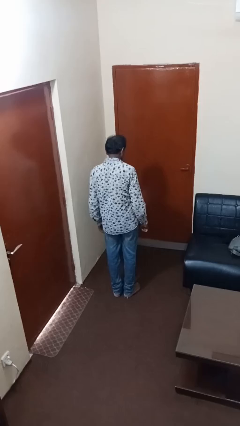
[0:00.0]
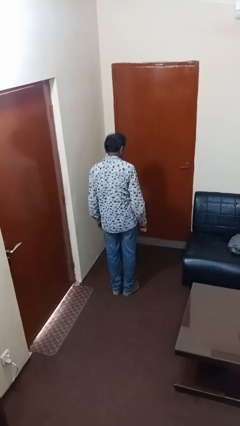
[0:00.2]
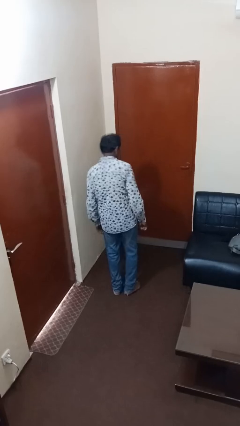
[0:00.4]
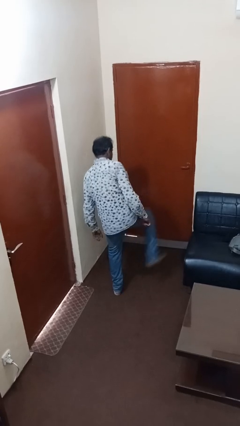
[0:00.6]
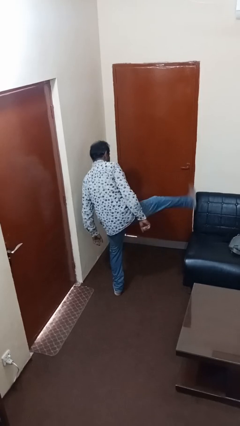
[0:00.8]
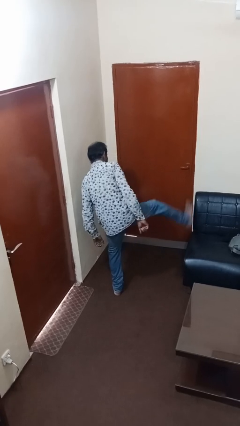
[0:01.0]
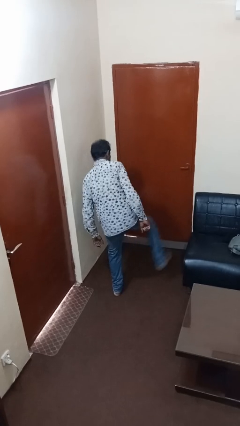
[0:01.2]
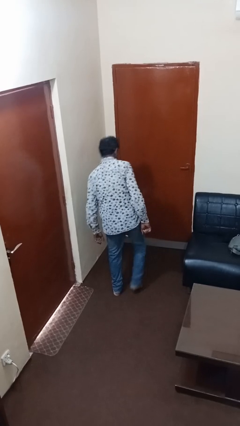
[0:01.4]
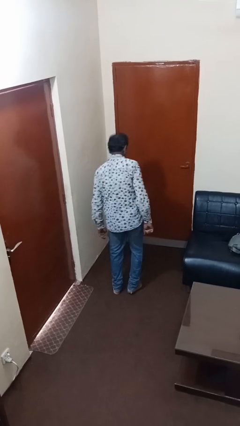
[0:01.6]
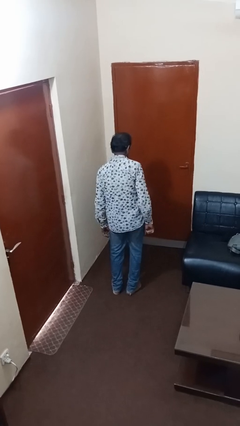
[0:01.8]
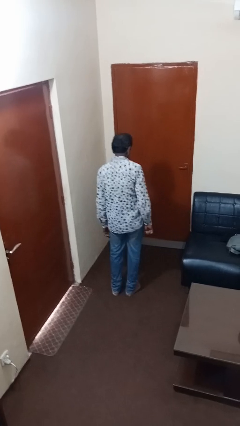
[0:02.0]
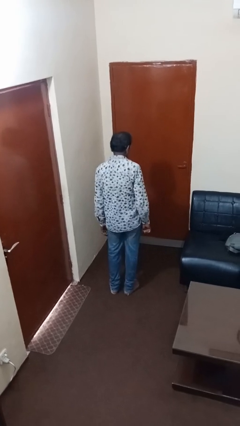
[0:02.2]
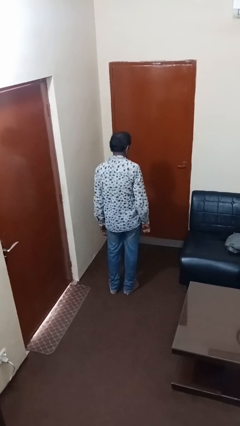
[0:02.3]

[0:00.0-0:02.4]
person karate kicks

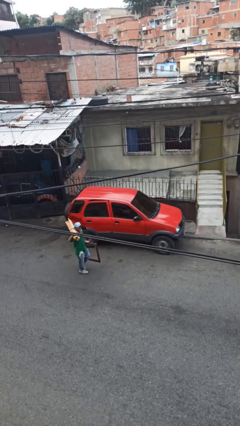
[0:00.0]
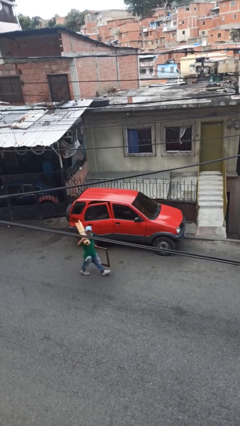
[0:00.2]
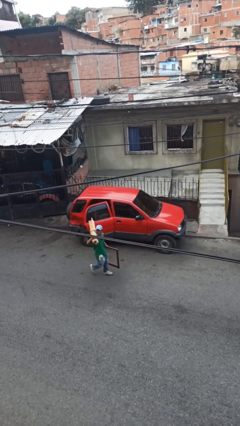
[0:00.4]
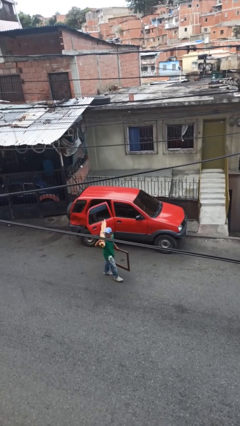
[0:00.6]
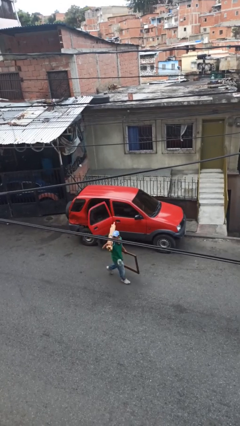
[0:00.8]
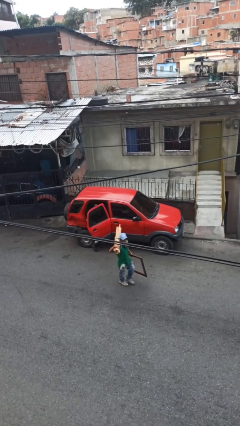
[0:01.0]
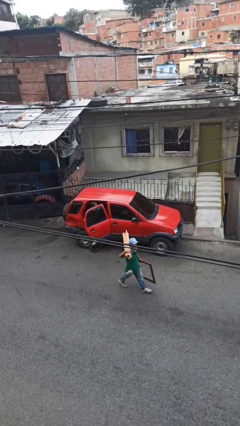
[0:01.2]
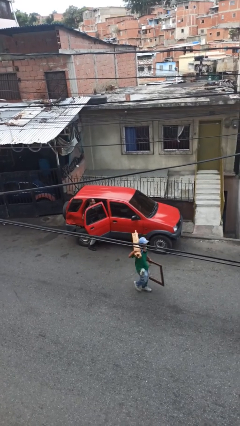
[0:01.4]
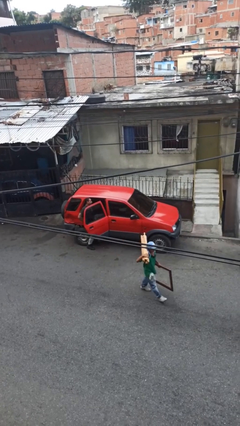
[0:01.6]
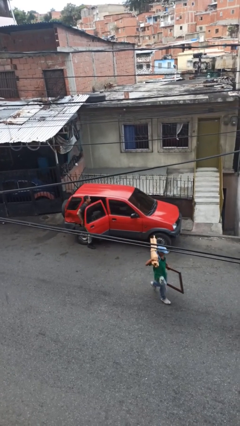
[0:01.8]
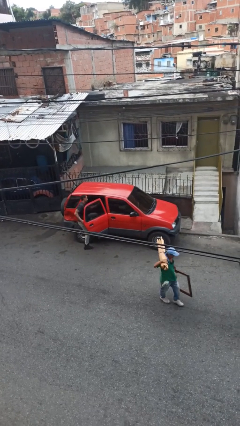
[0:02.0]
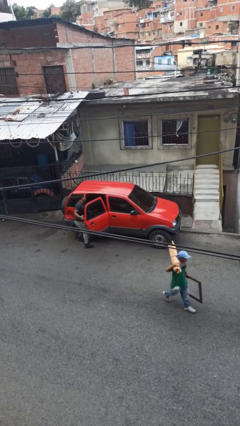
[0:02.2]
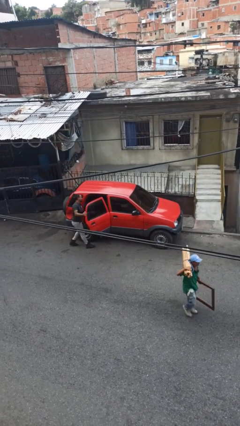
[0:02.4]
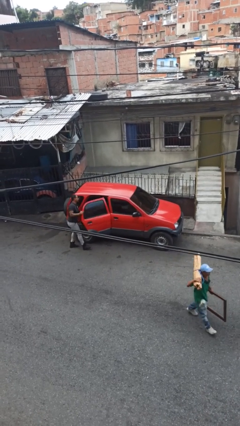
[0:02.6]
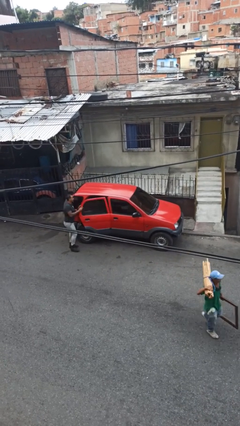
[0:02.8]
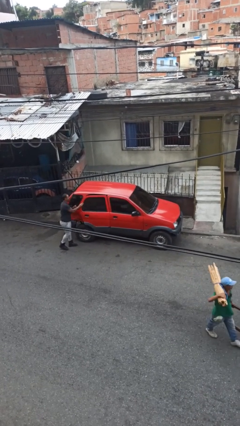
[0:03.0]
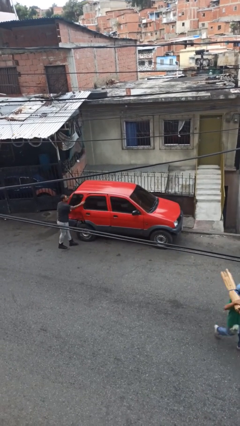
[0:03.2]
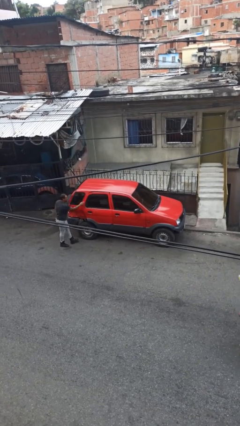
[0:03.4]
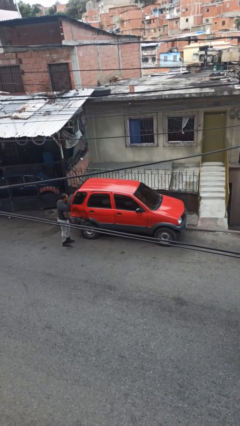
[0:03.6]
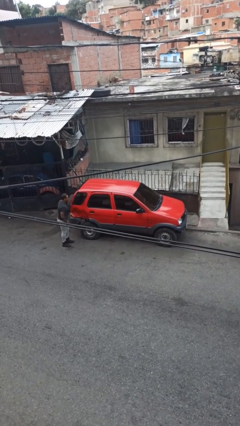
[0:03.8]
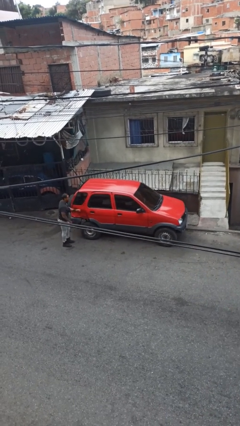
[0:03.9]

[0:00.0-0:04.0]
car drops off person

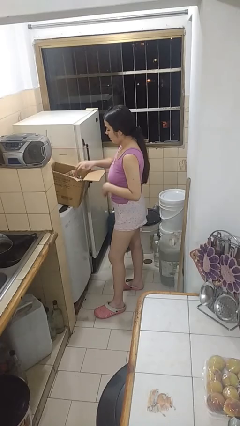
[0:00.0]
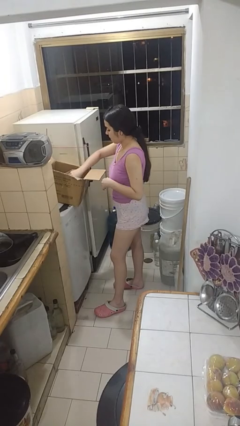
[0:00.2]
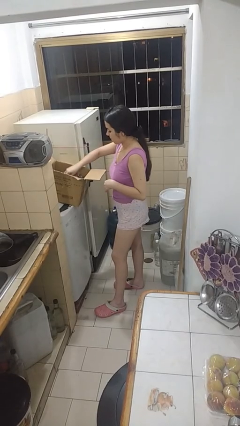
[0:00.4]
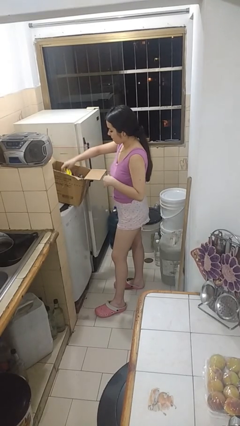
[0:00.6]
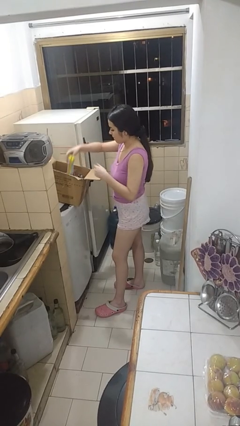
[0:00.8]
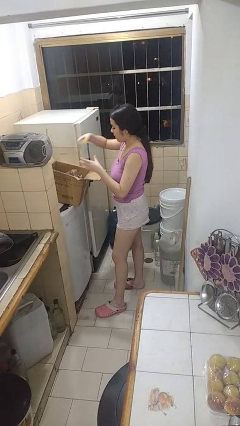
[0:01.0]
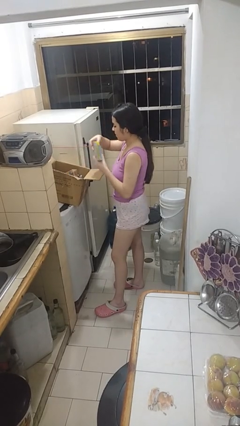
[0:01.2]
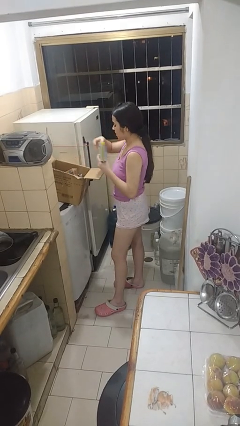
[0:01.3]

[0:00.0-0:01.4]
person takes object from box

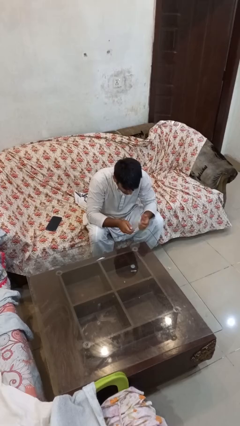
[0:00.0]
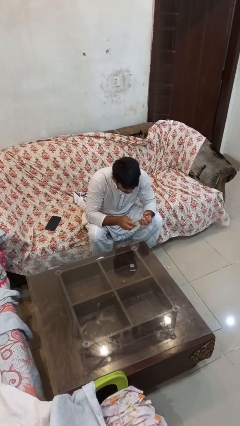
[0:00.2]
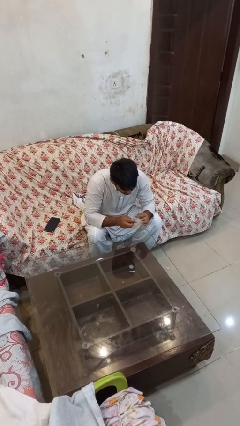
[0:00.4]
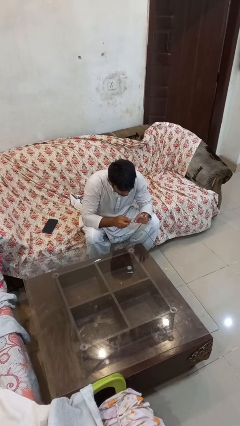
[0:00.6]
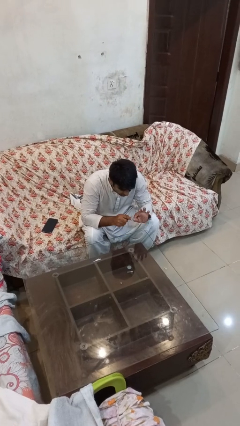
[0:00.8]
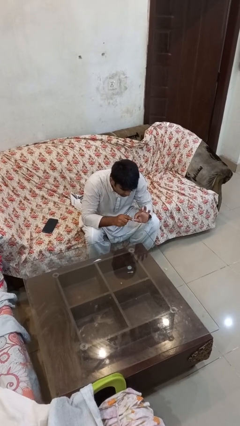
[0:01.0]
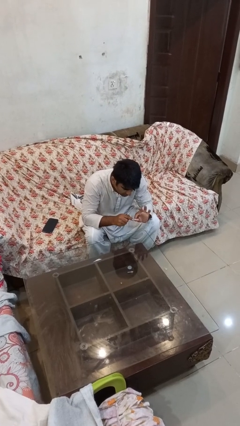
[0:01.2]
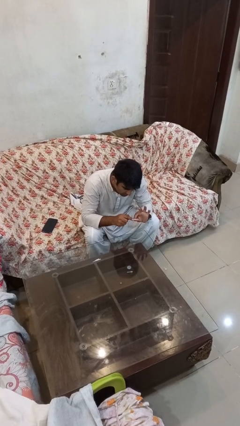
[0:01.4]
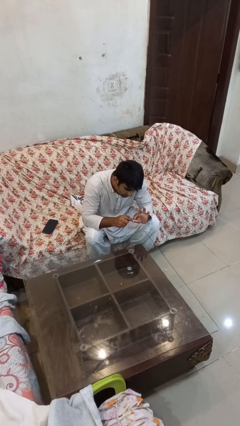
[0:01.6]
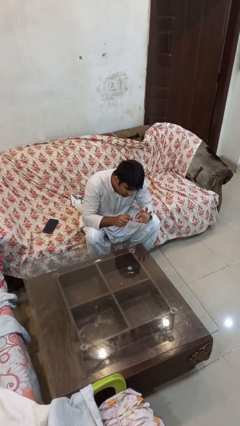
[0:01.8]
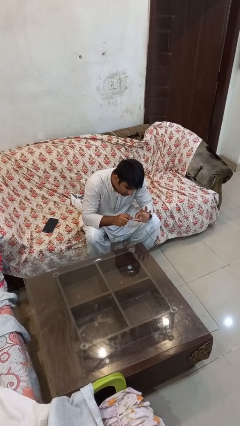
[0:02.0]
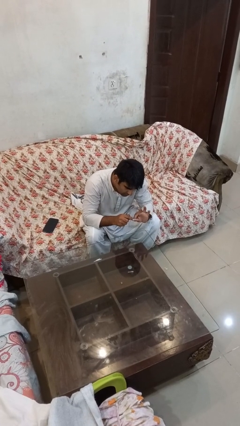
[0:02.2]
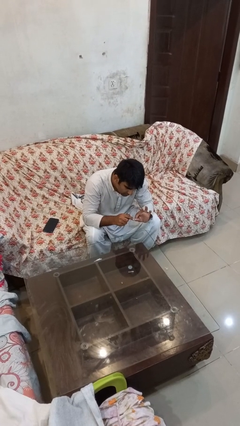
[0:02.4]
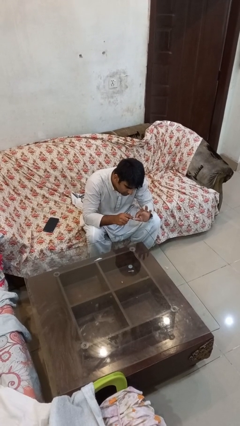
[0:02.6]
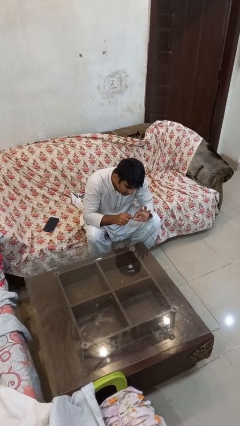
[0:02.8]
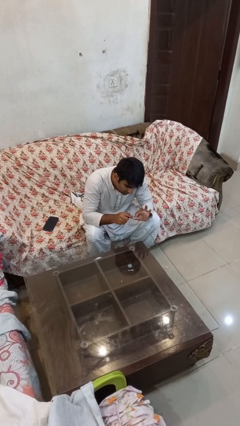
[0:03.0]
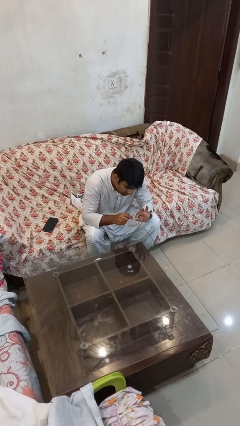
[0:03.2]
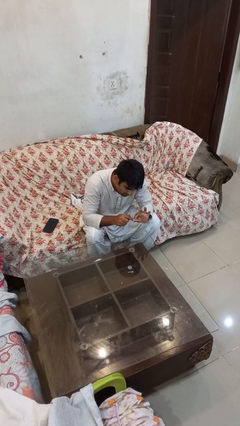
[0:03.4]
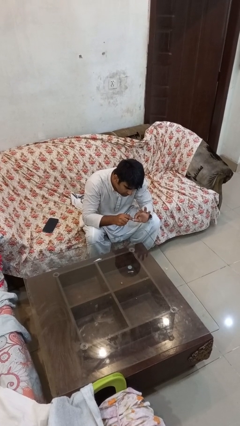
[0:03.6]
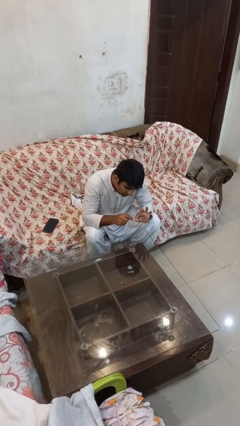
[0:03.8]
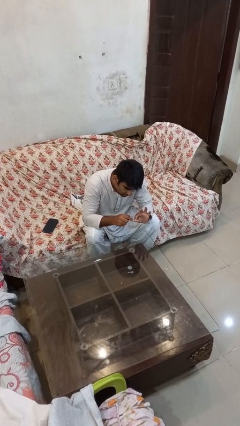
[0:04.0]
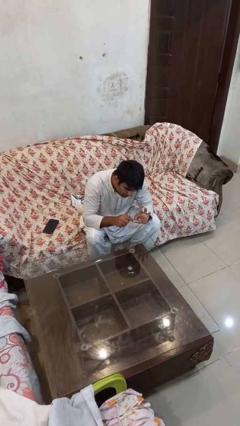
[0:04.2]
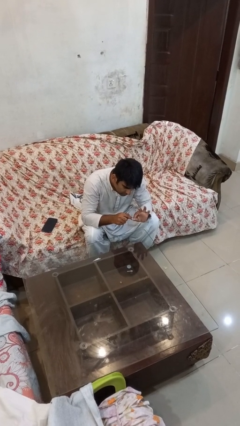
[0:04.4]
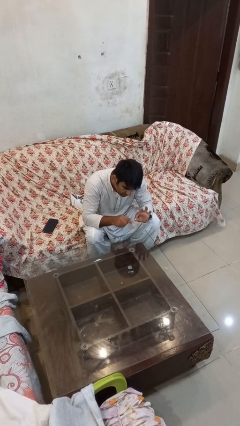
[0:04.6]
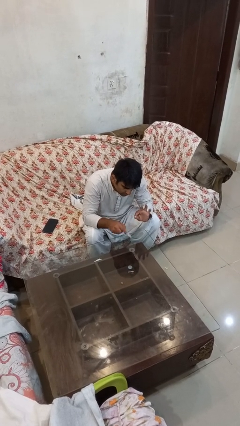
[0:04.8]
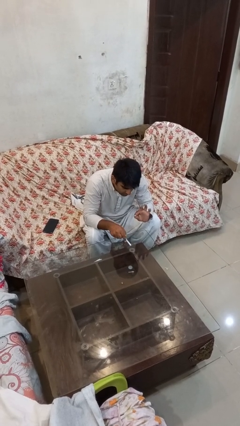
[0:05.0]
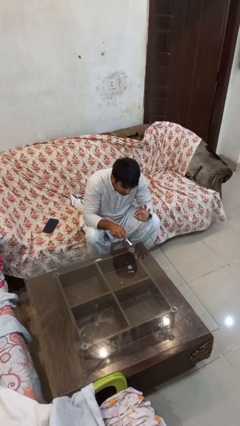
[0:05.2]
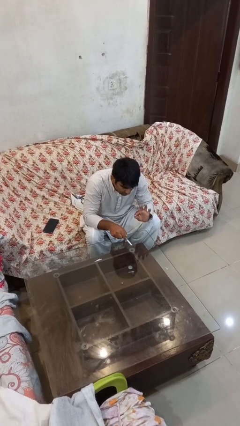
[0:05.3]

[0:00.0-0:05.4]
person files fingernails

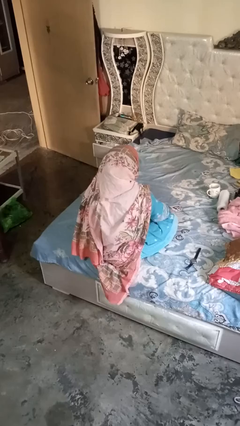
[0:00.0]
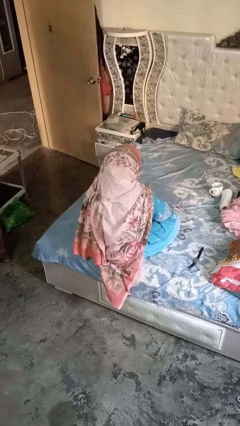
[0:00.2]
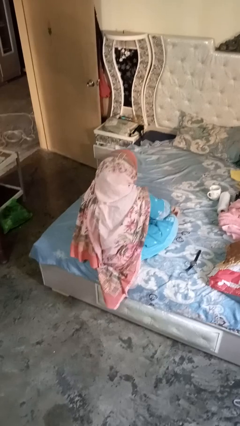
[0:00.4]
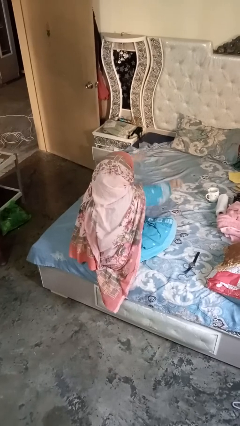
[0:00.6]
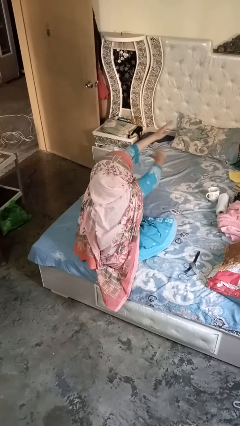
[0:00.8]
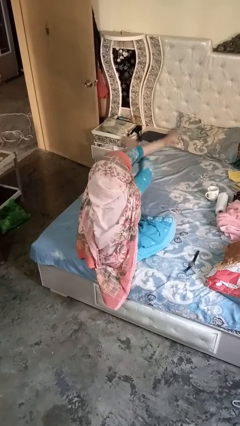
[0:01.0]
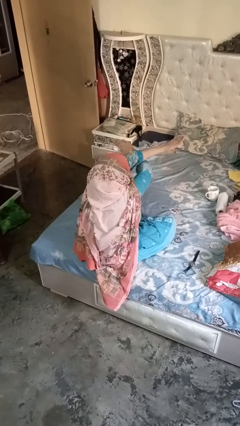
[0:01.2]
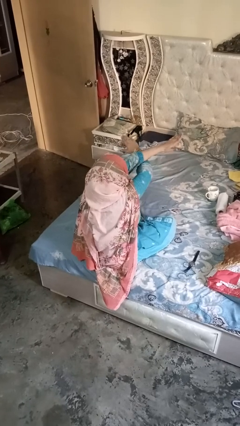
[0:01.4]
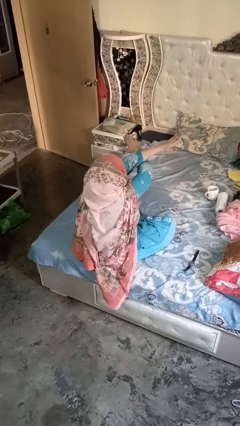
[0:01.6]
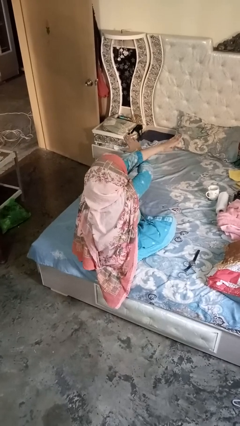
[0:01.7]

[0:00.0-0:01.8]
person gestures arms x

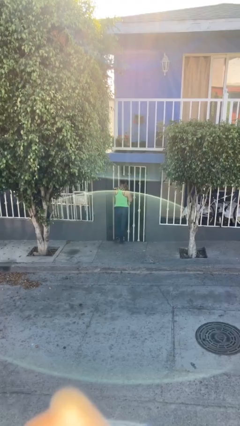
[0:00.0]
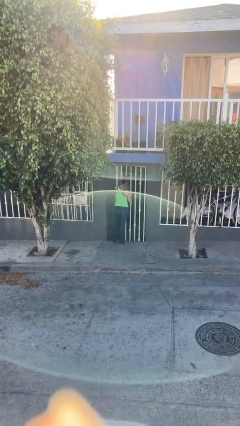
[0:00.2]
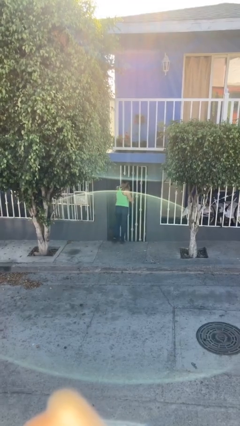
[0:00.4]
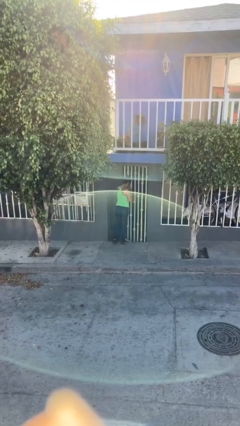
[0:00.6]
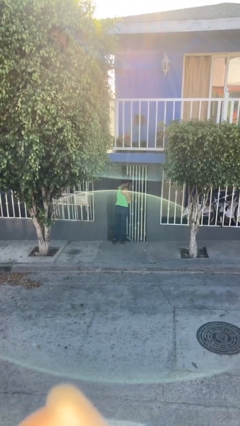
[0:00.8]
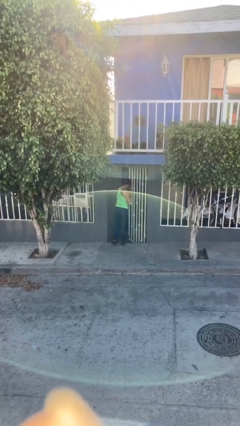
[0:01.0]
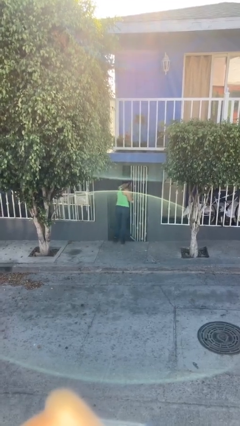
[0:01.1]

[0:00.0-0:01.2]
person opens facility door

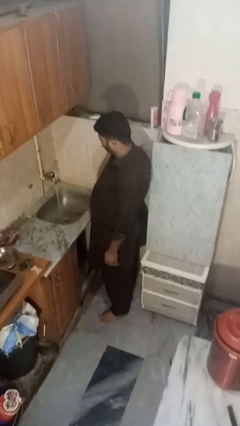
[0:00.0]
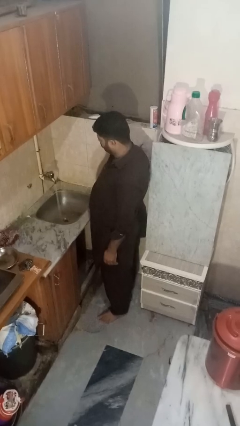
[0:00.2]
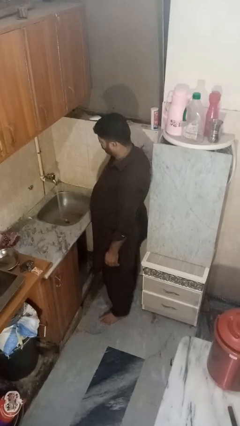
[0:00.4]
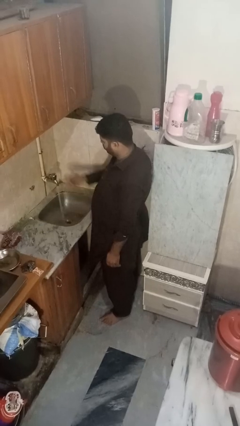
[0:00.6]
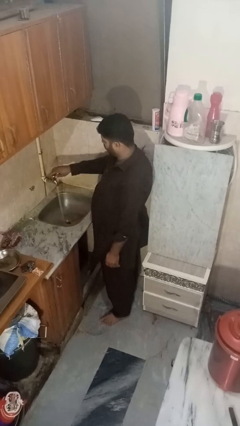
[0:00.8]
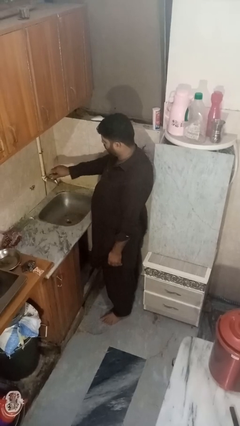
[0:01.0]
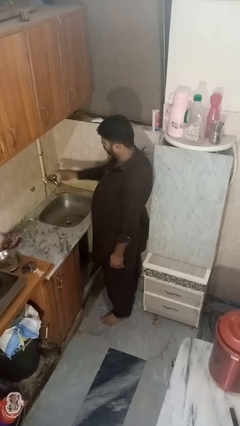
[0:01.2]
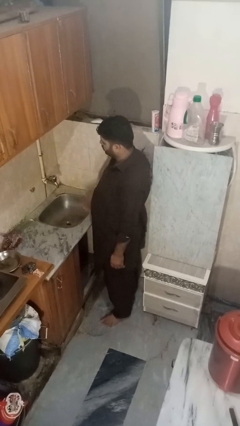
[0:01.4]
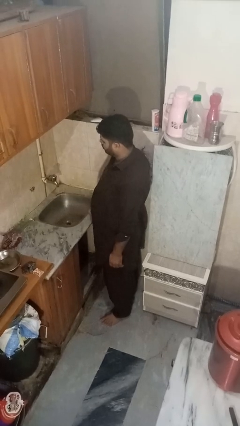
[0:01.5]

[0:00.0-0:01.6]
person turns off faucet
